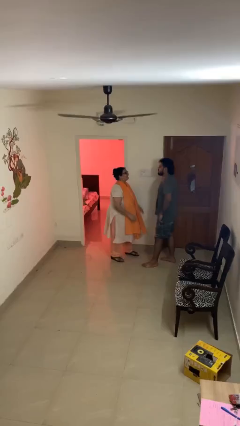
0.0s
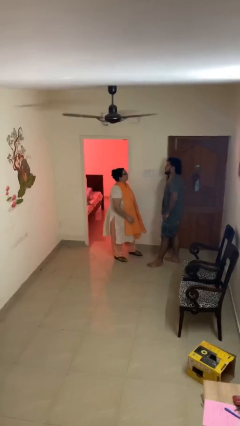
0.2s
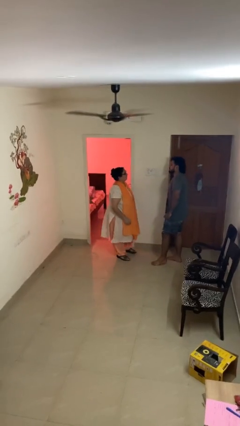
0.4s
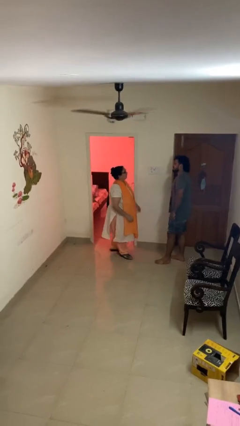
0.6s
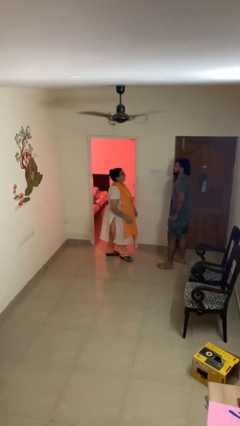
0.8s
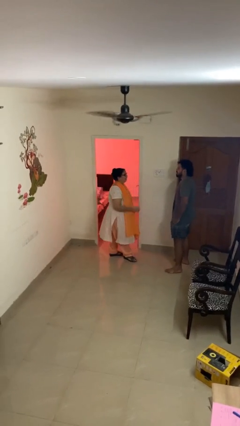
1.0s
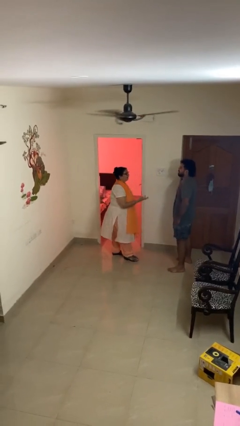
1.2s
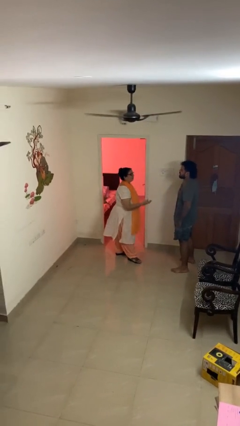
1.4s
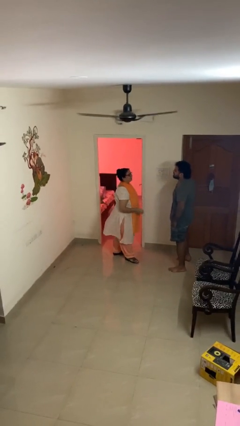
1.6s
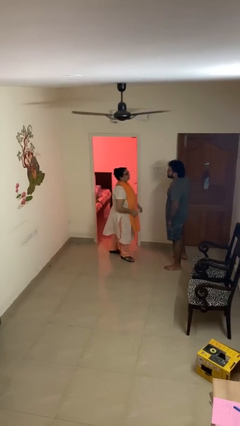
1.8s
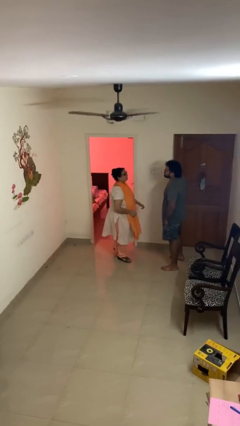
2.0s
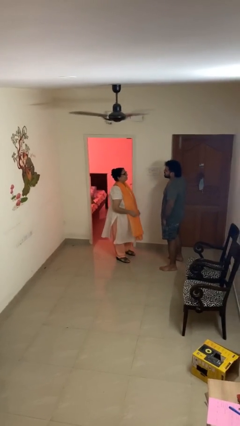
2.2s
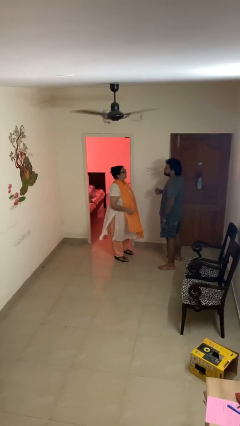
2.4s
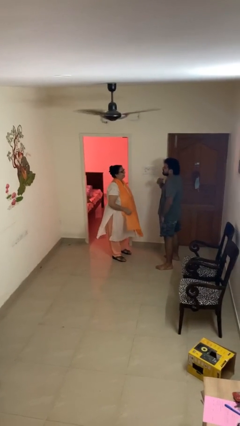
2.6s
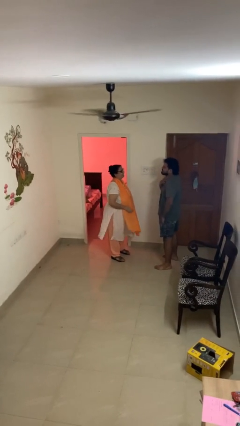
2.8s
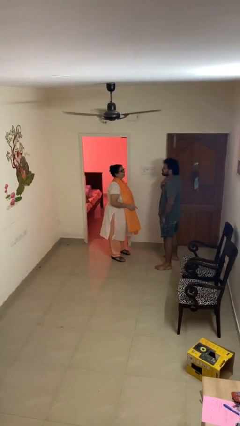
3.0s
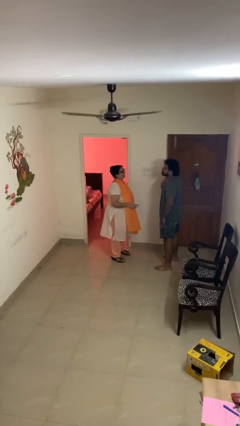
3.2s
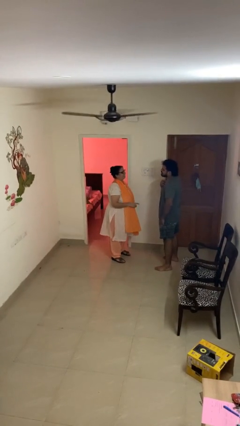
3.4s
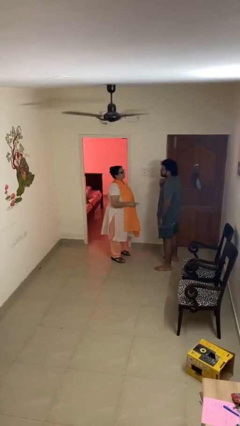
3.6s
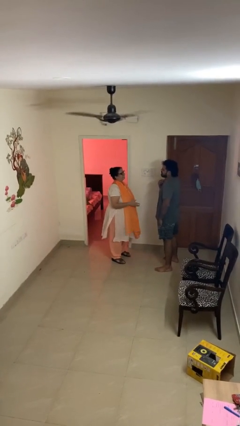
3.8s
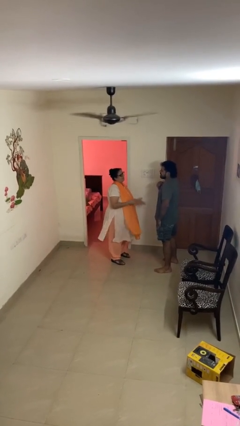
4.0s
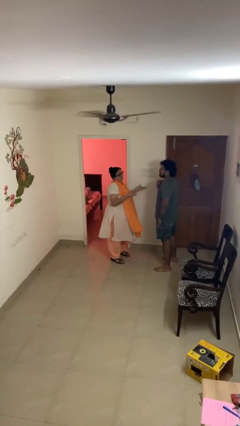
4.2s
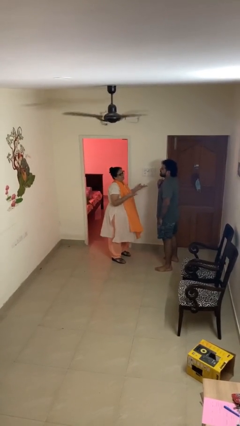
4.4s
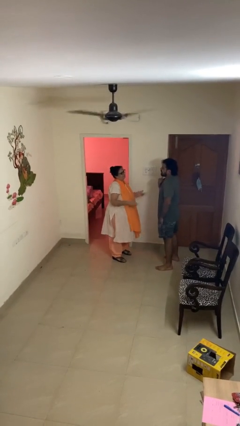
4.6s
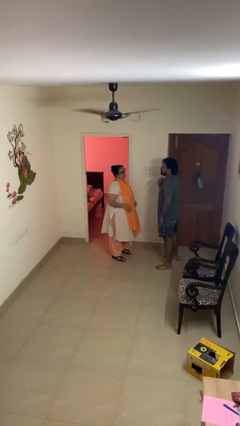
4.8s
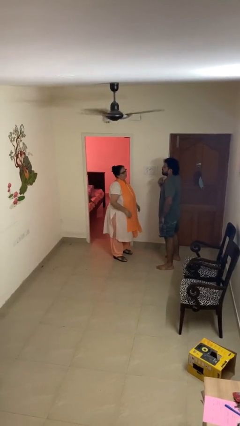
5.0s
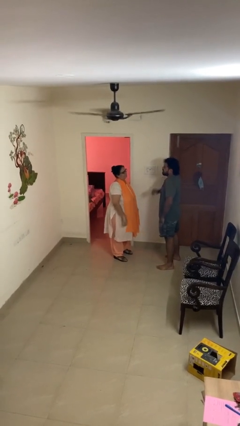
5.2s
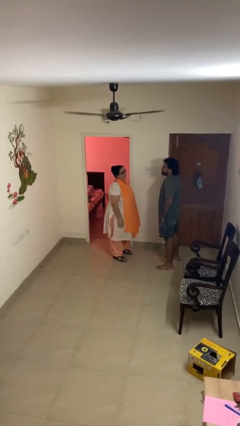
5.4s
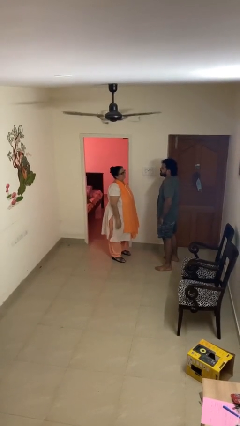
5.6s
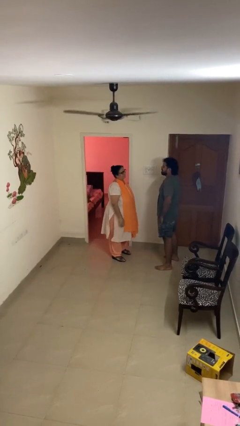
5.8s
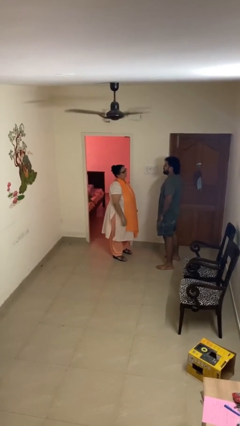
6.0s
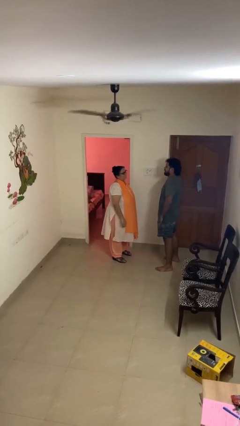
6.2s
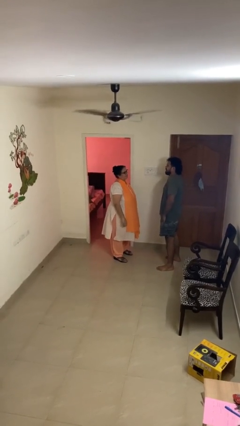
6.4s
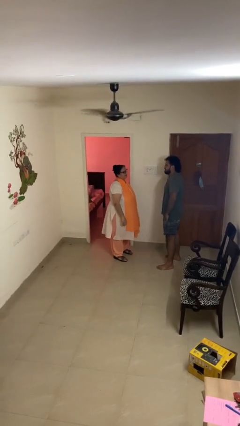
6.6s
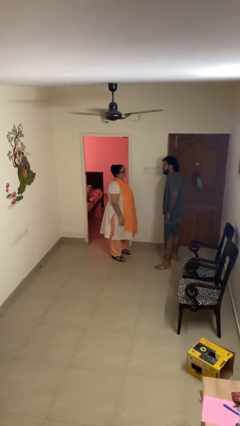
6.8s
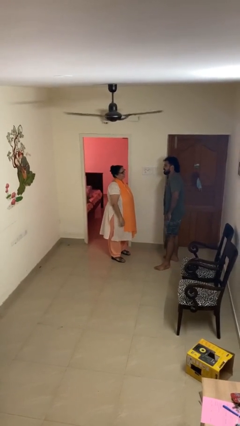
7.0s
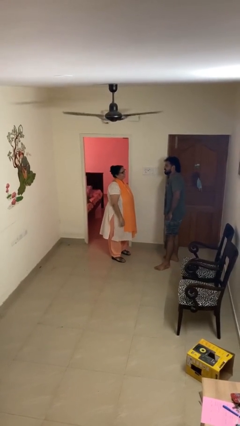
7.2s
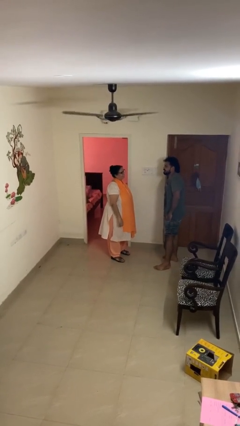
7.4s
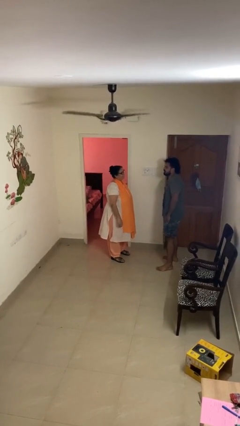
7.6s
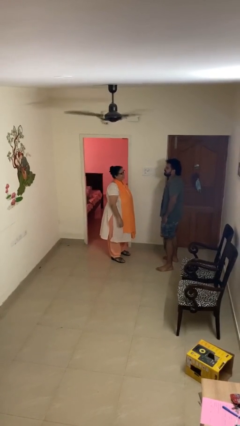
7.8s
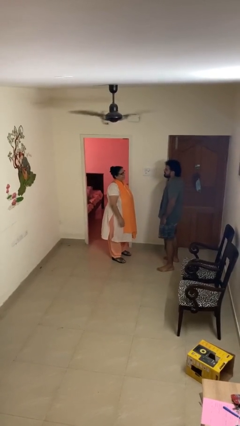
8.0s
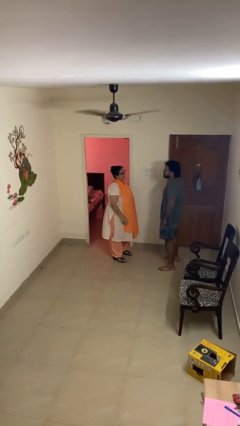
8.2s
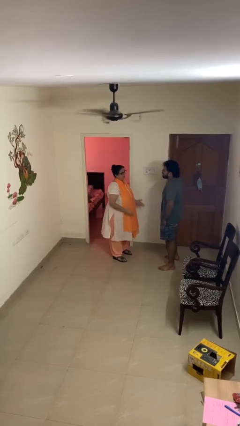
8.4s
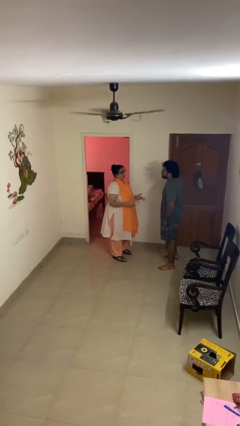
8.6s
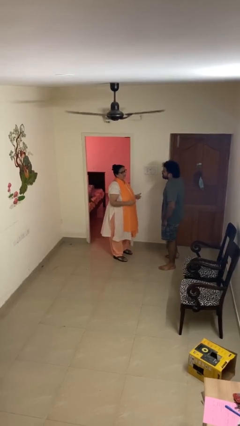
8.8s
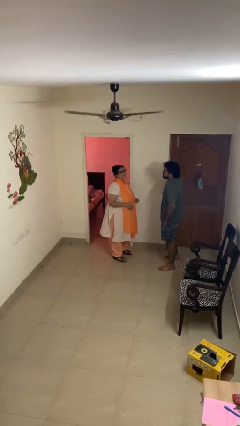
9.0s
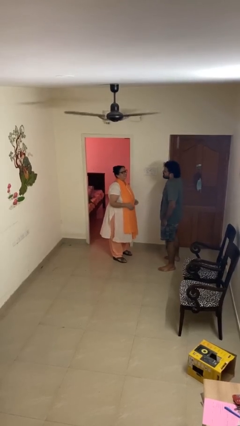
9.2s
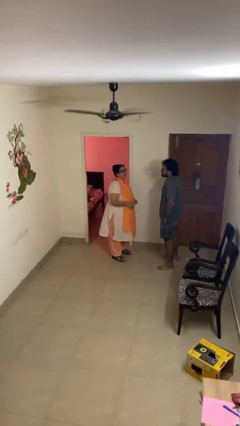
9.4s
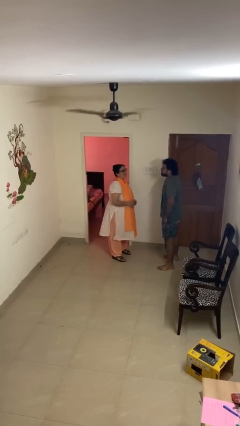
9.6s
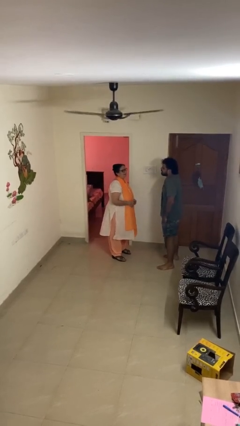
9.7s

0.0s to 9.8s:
person talks to person

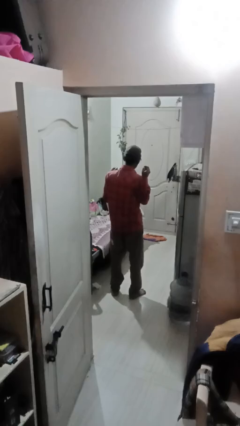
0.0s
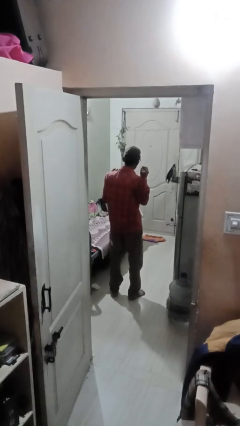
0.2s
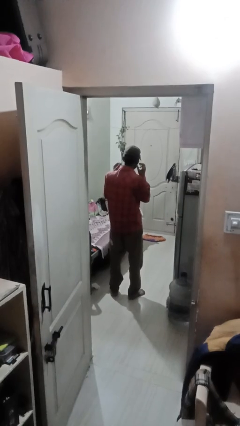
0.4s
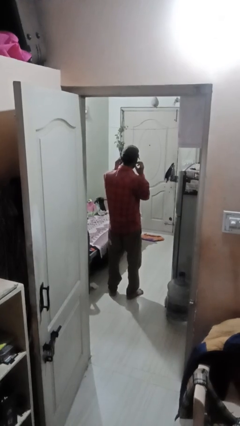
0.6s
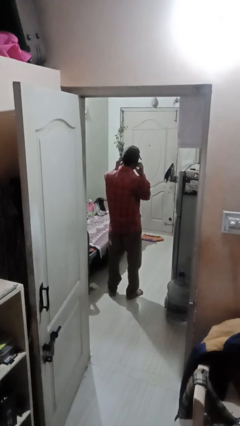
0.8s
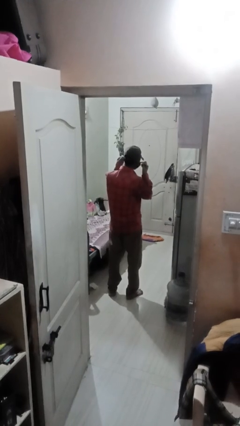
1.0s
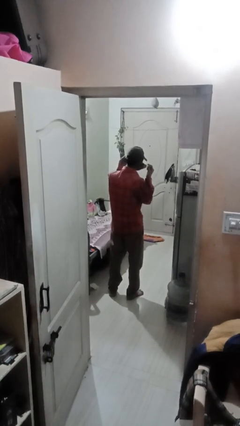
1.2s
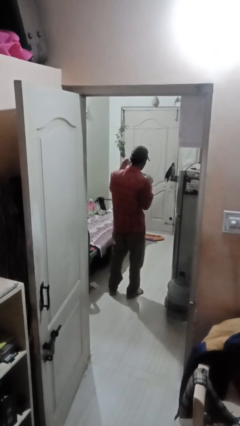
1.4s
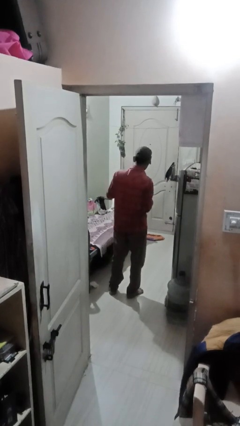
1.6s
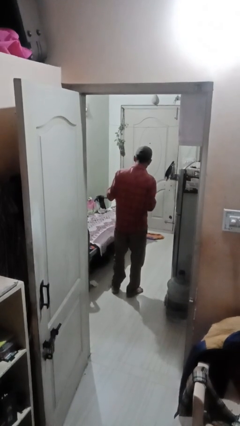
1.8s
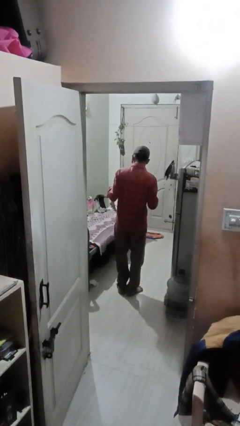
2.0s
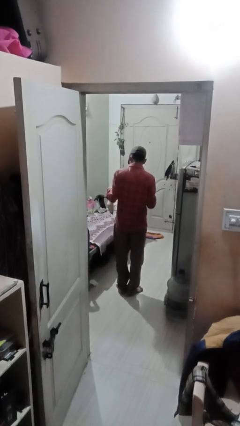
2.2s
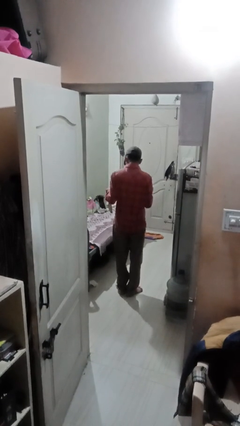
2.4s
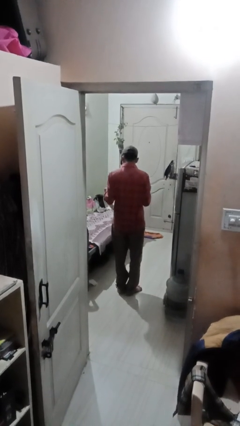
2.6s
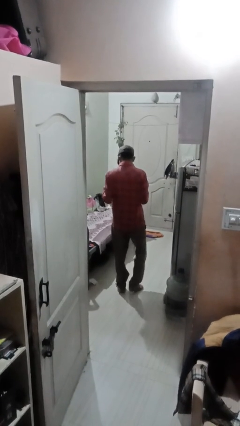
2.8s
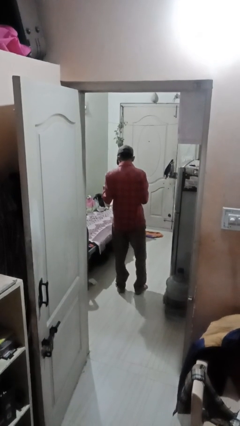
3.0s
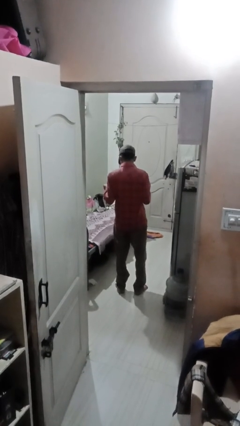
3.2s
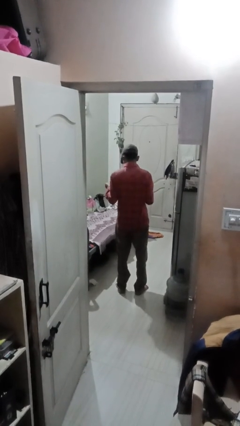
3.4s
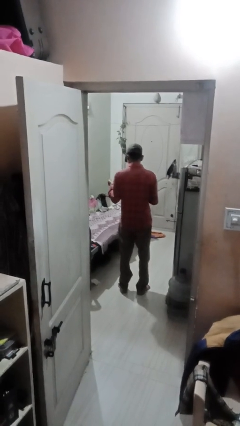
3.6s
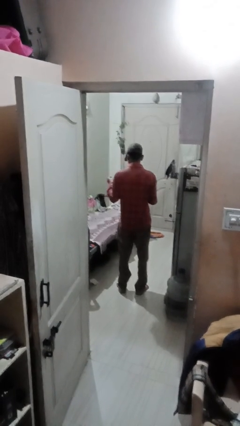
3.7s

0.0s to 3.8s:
person takes off facemask

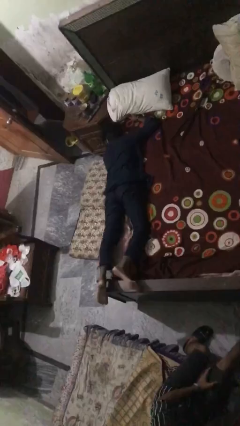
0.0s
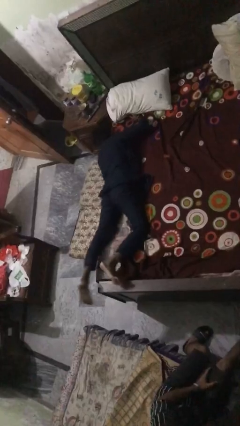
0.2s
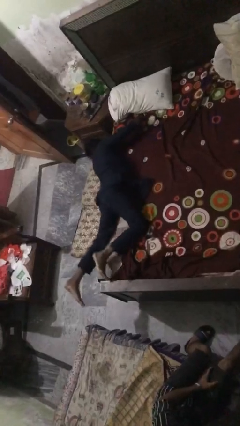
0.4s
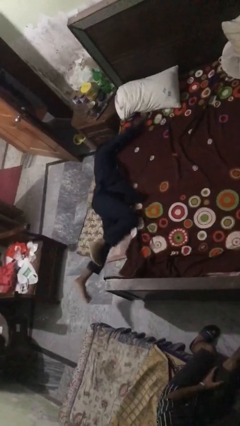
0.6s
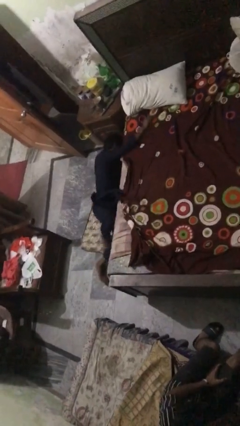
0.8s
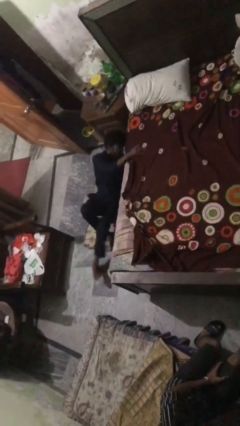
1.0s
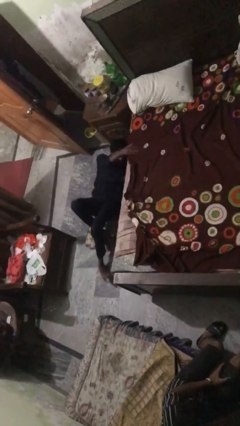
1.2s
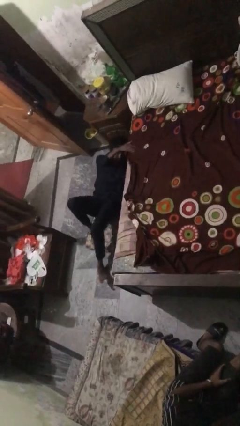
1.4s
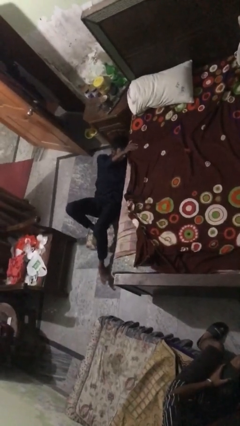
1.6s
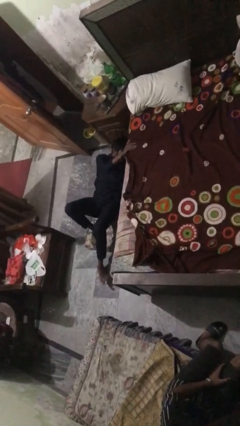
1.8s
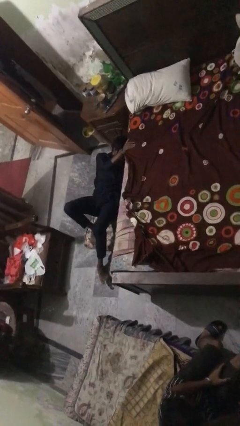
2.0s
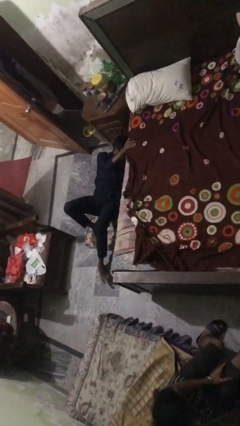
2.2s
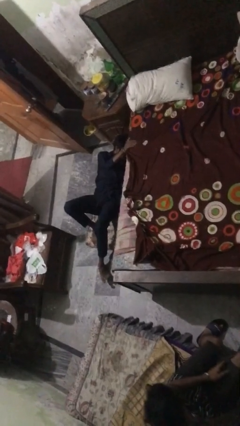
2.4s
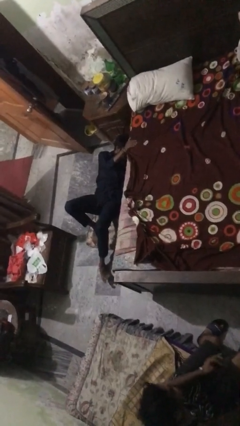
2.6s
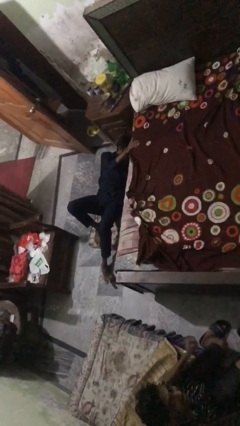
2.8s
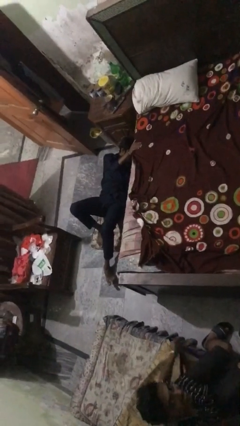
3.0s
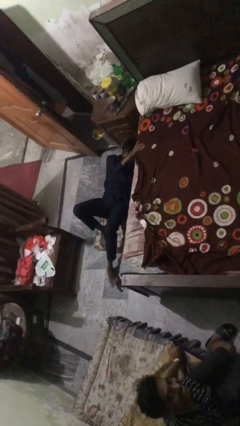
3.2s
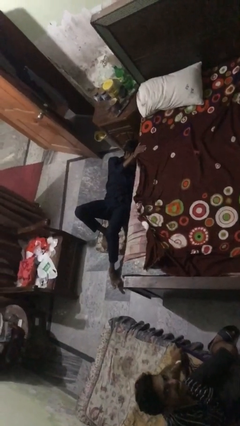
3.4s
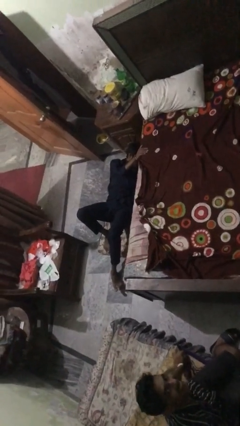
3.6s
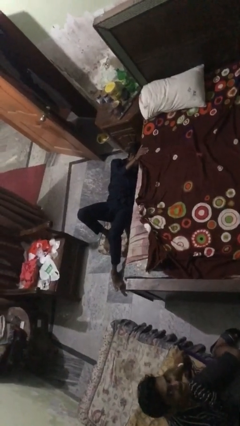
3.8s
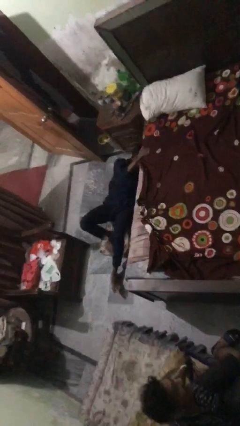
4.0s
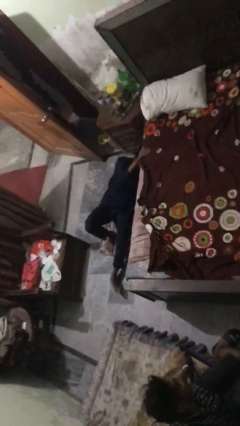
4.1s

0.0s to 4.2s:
person falls from bed
